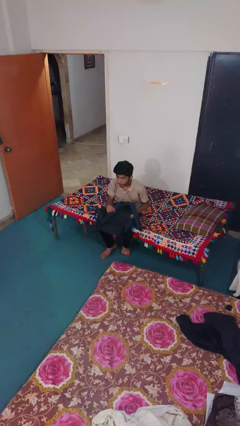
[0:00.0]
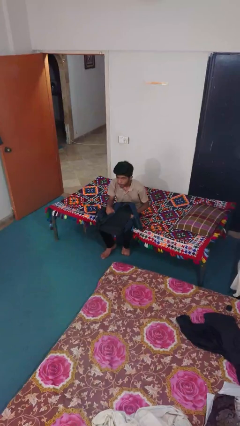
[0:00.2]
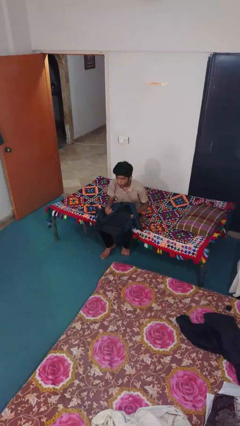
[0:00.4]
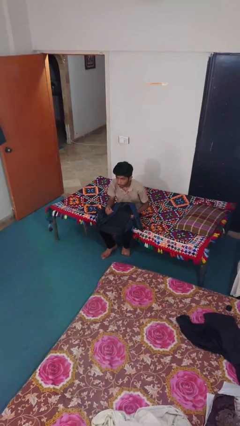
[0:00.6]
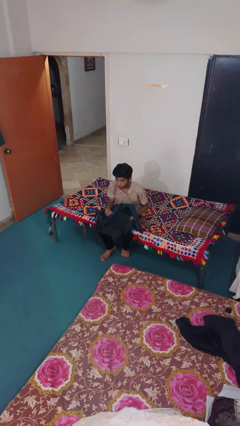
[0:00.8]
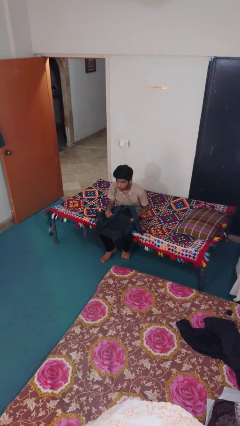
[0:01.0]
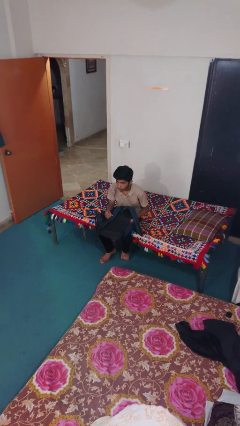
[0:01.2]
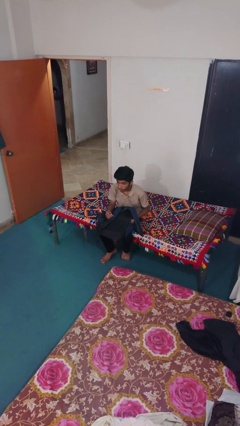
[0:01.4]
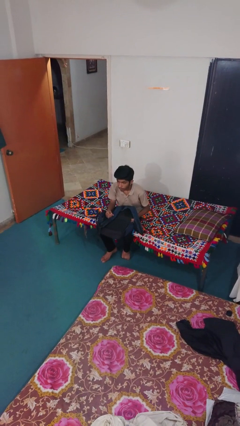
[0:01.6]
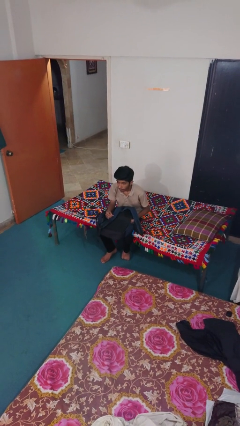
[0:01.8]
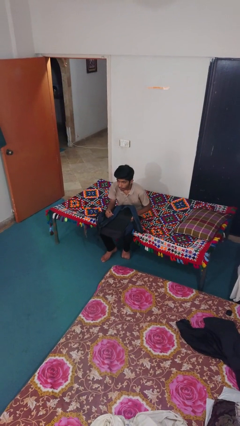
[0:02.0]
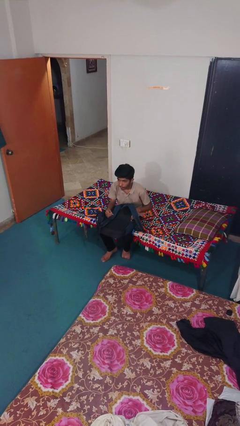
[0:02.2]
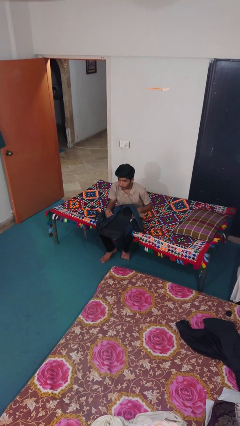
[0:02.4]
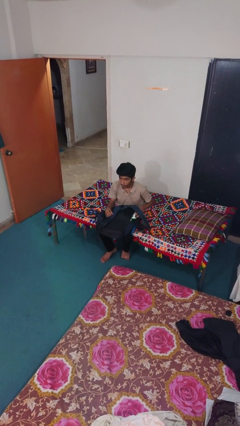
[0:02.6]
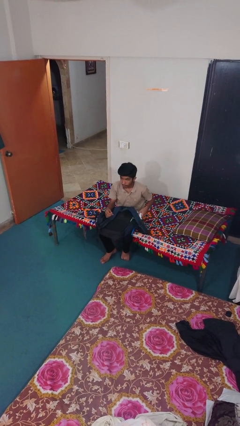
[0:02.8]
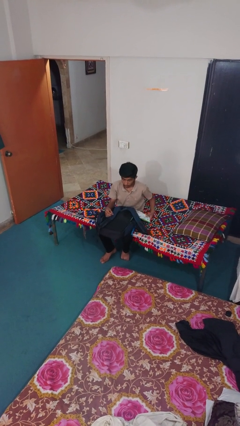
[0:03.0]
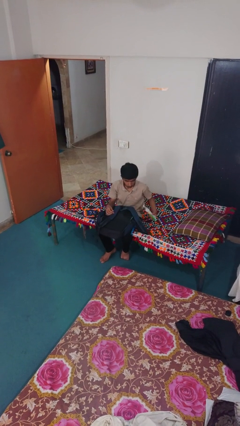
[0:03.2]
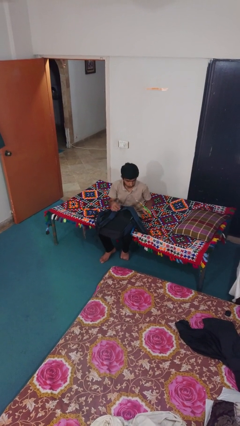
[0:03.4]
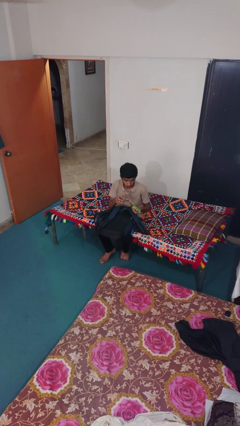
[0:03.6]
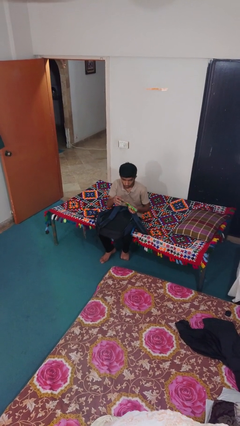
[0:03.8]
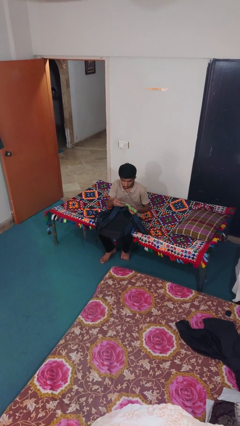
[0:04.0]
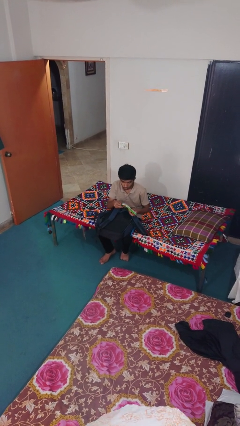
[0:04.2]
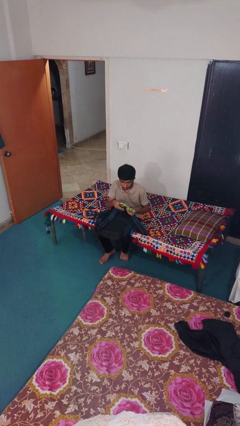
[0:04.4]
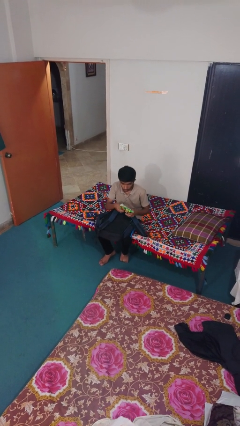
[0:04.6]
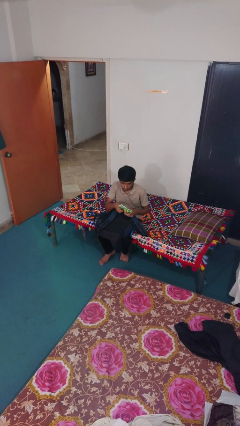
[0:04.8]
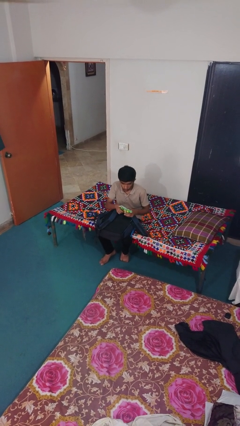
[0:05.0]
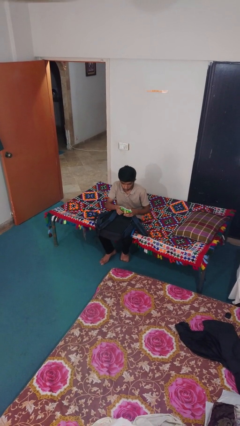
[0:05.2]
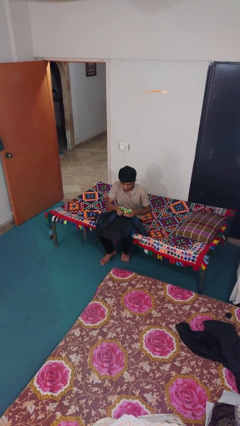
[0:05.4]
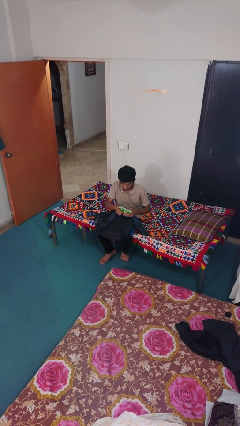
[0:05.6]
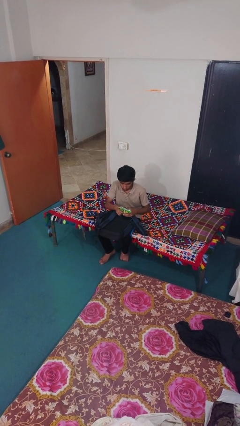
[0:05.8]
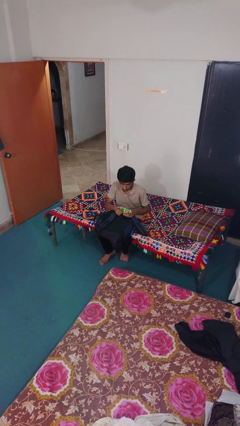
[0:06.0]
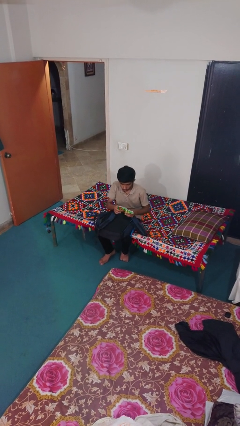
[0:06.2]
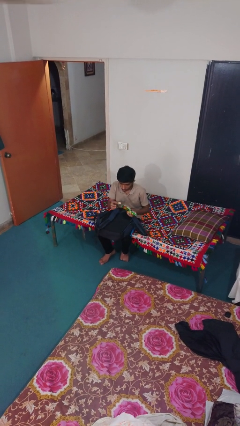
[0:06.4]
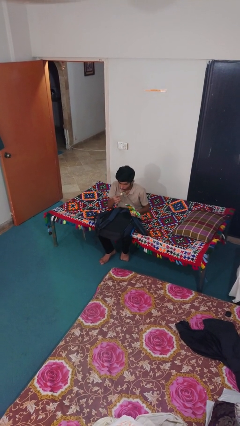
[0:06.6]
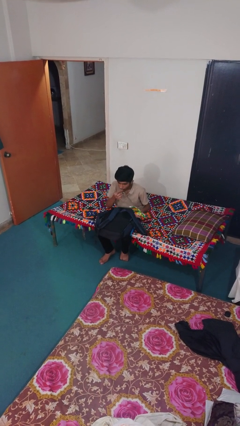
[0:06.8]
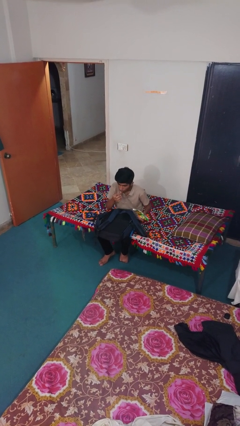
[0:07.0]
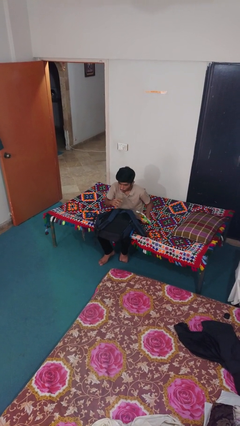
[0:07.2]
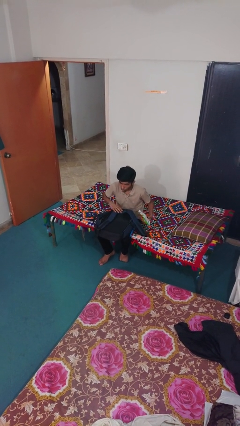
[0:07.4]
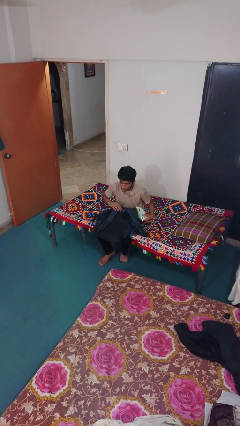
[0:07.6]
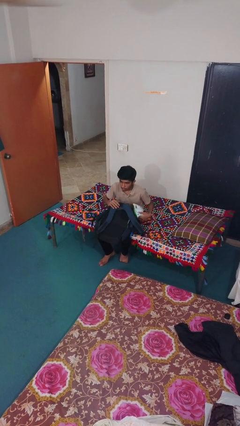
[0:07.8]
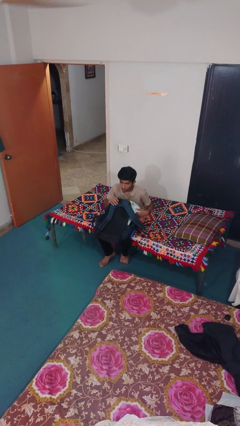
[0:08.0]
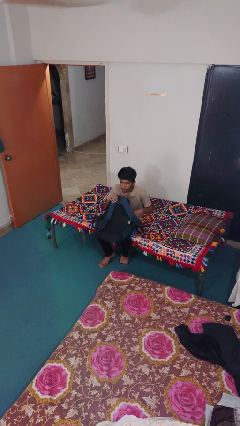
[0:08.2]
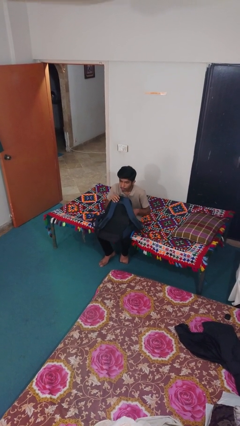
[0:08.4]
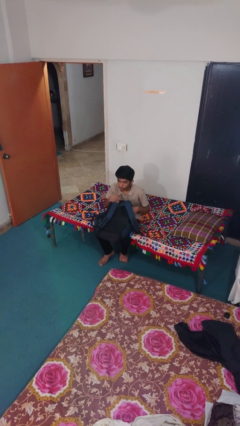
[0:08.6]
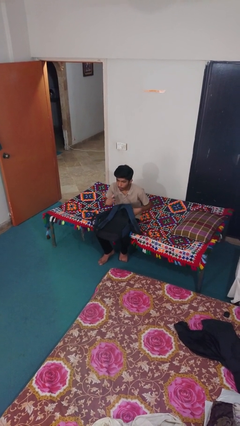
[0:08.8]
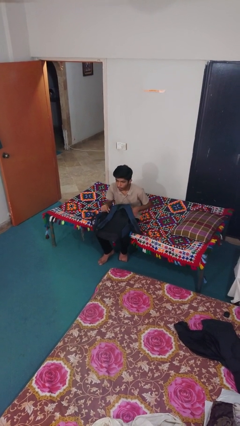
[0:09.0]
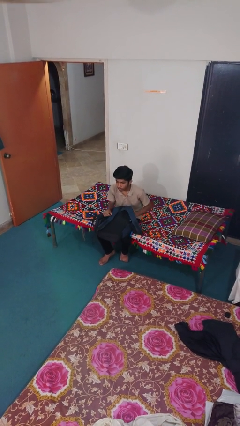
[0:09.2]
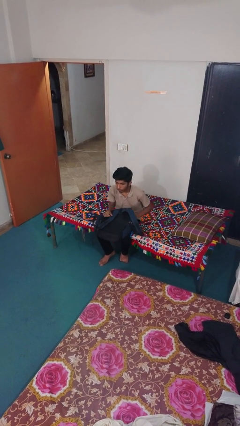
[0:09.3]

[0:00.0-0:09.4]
person eats snack from bag

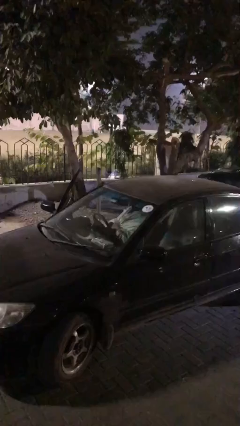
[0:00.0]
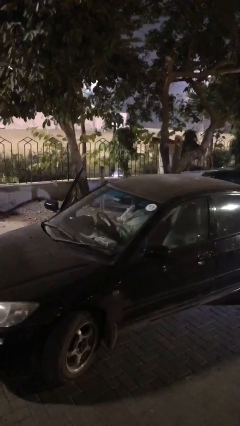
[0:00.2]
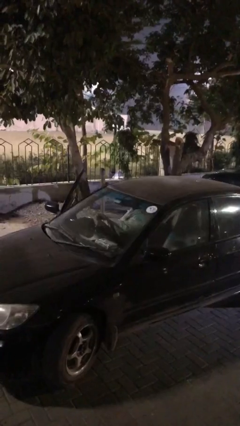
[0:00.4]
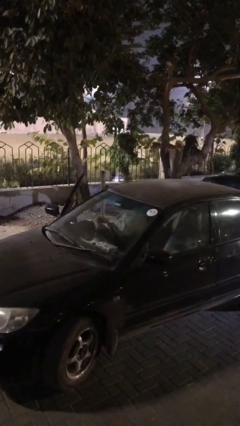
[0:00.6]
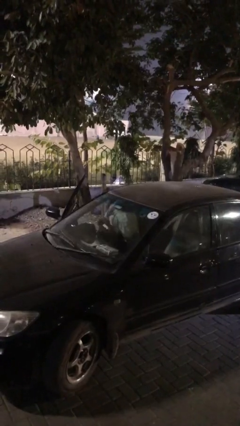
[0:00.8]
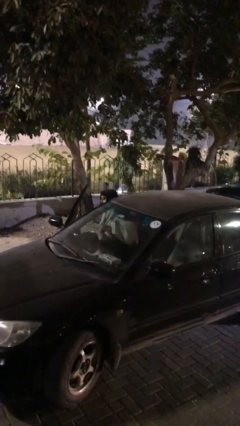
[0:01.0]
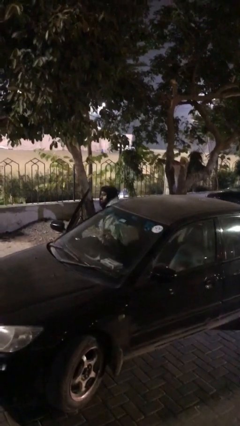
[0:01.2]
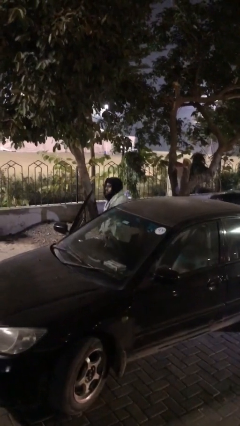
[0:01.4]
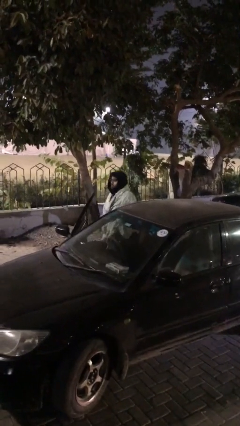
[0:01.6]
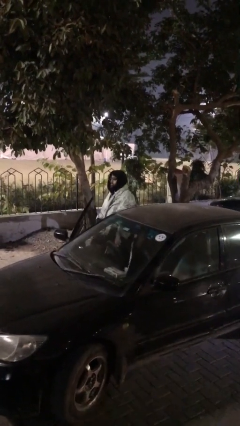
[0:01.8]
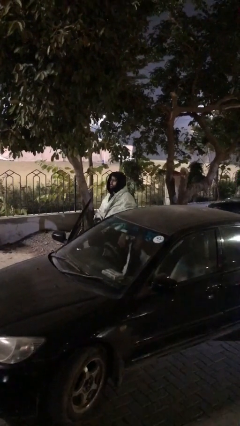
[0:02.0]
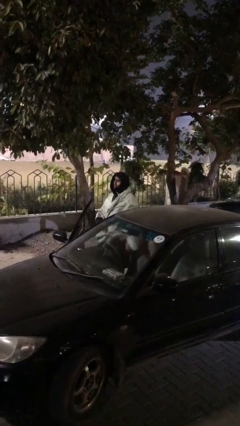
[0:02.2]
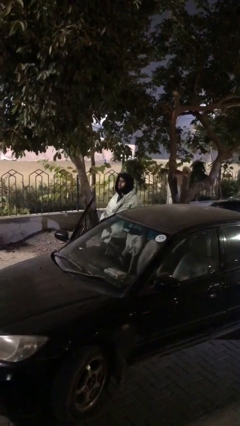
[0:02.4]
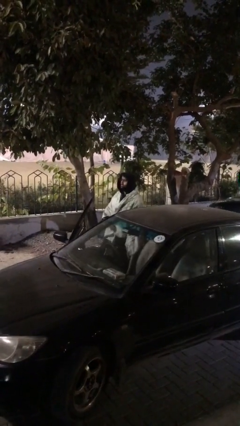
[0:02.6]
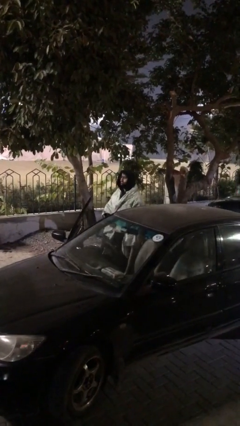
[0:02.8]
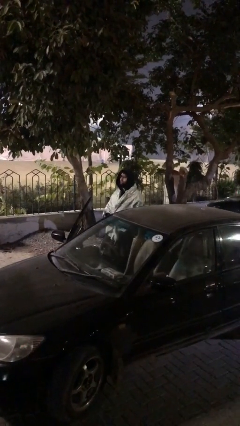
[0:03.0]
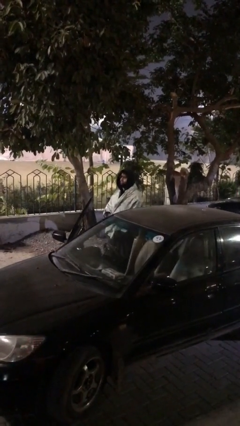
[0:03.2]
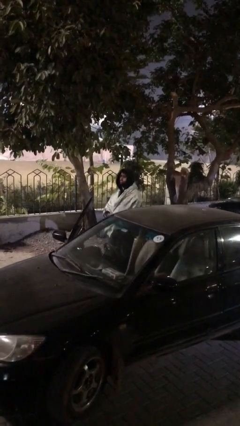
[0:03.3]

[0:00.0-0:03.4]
person exits car

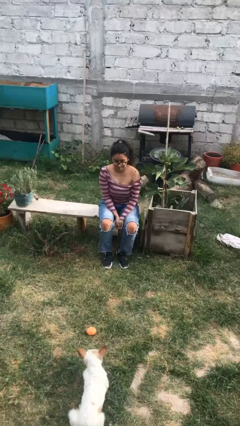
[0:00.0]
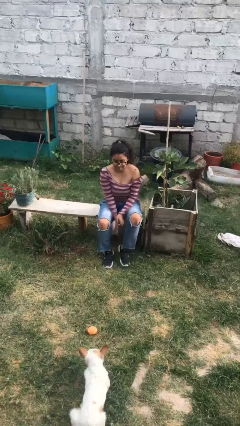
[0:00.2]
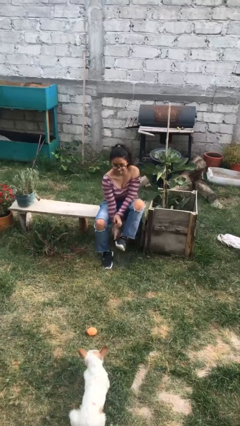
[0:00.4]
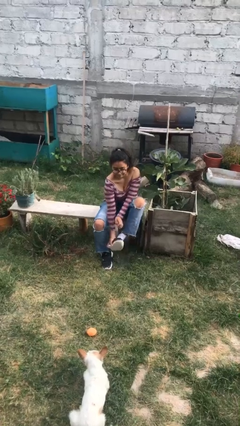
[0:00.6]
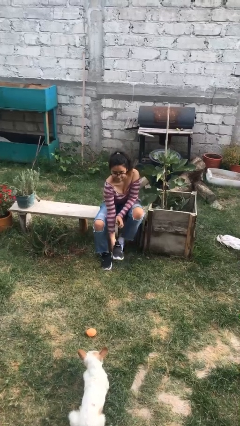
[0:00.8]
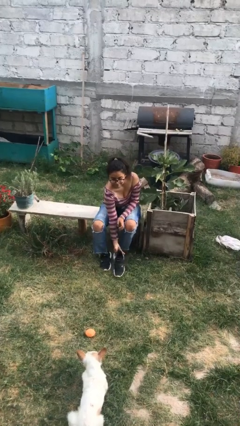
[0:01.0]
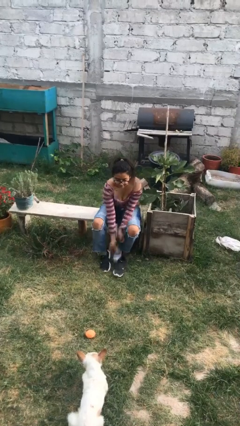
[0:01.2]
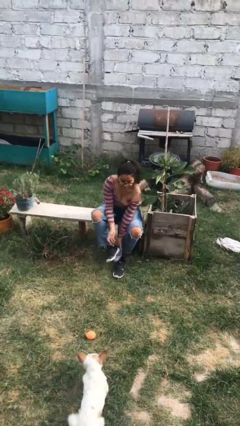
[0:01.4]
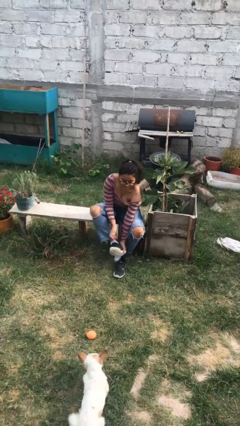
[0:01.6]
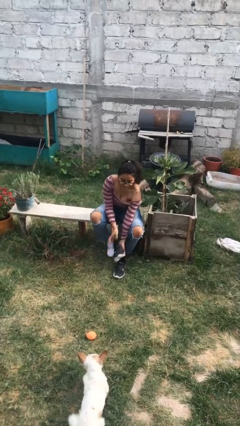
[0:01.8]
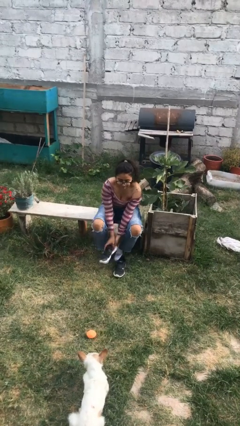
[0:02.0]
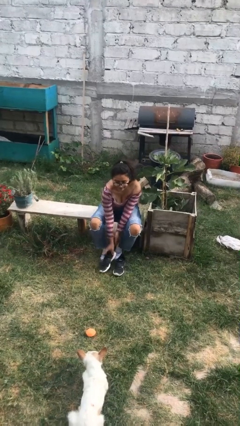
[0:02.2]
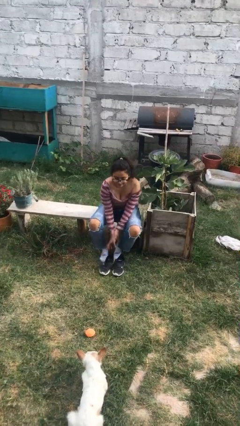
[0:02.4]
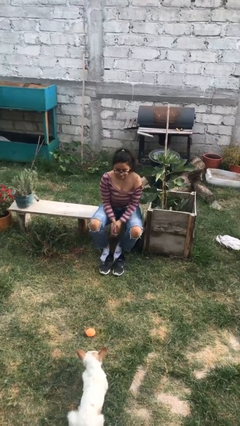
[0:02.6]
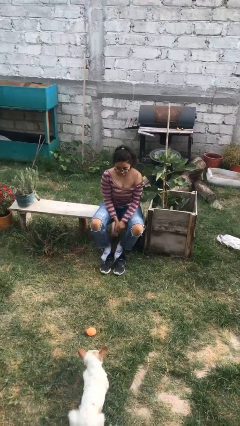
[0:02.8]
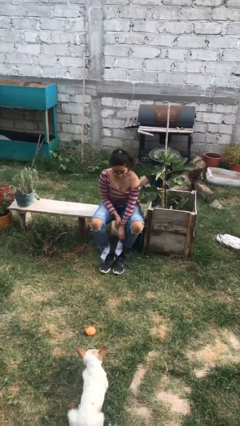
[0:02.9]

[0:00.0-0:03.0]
person takes off shoes

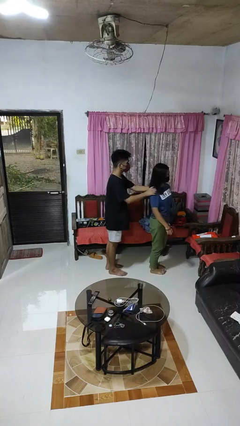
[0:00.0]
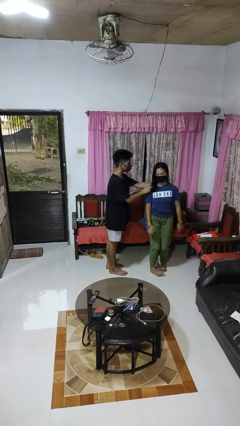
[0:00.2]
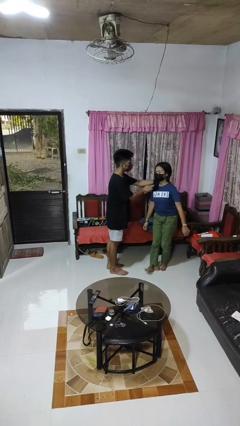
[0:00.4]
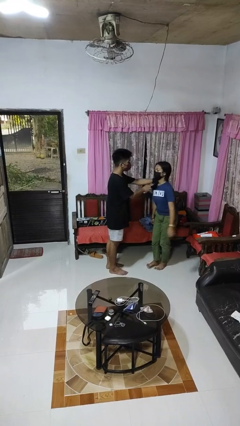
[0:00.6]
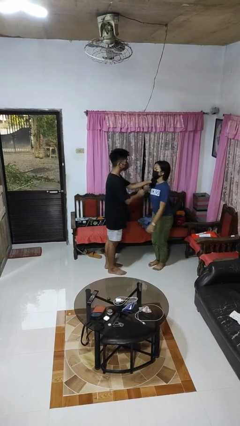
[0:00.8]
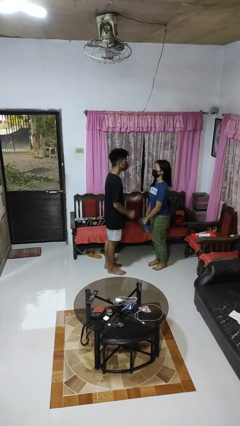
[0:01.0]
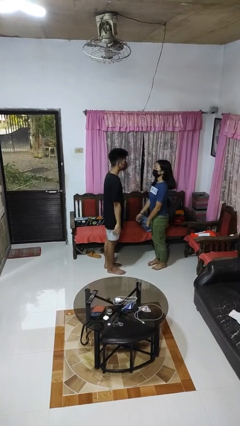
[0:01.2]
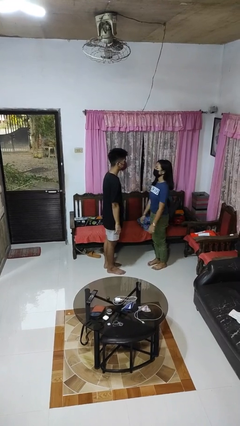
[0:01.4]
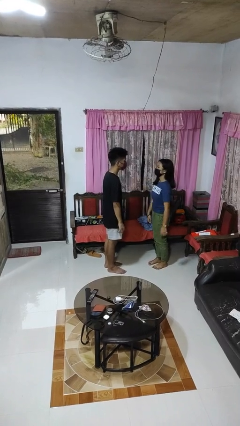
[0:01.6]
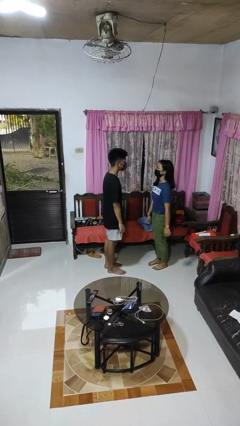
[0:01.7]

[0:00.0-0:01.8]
person spins person around

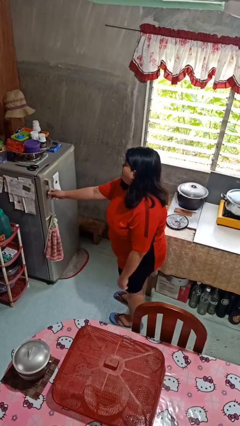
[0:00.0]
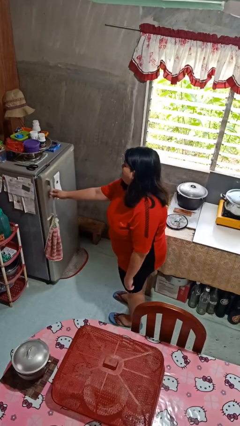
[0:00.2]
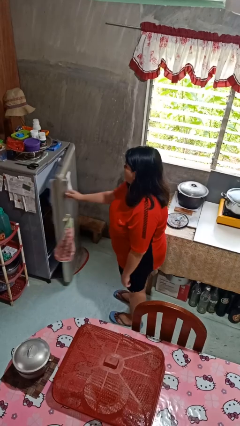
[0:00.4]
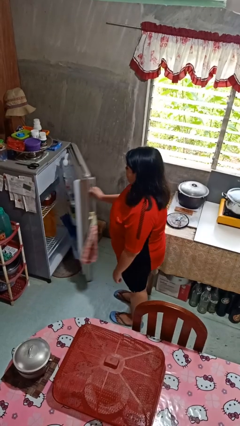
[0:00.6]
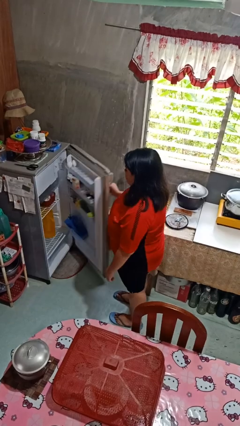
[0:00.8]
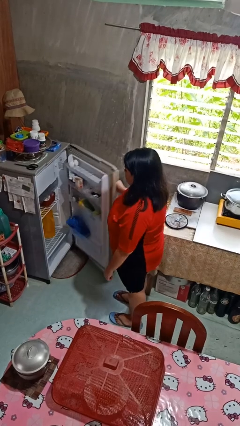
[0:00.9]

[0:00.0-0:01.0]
person opens refrigerator
